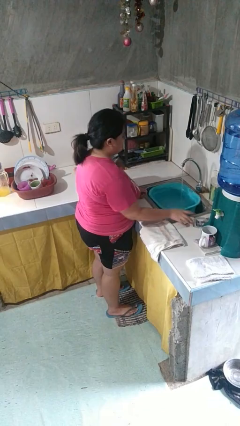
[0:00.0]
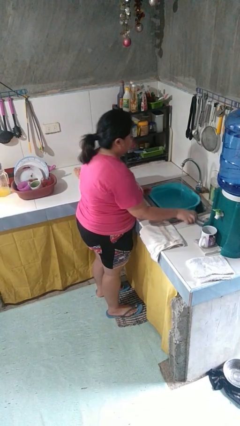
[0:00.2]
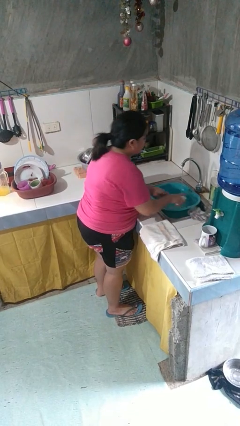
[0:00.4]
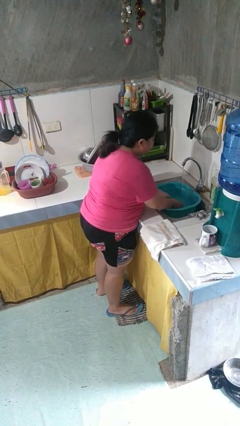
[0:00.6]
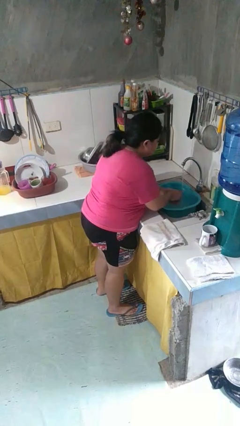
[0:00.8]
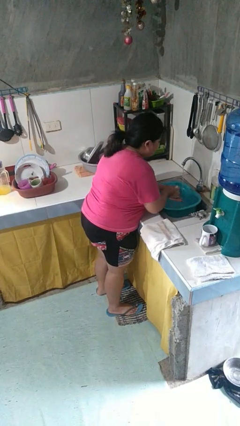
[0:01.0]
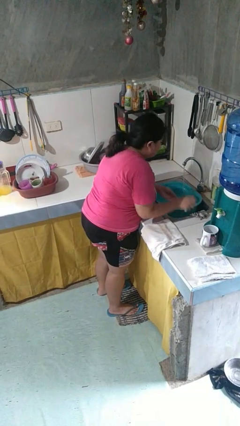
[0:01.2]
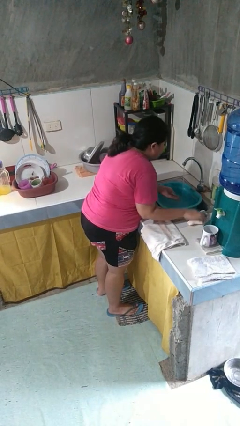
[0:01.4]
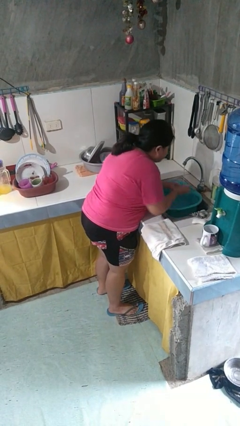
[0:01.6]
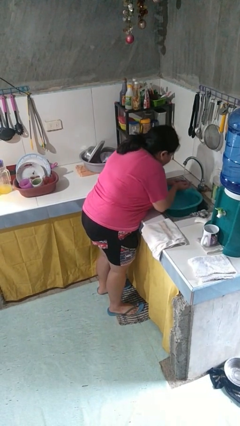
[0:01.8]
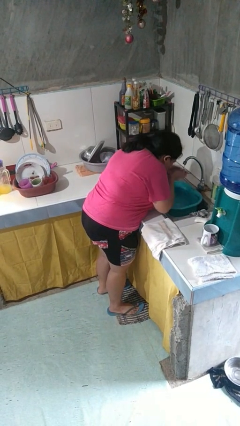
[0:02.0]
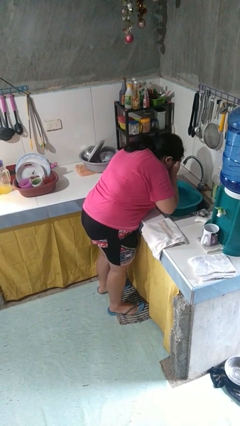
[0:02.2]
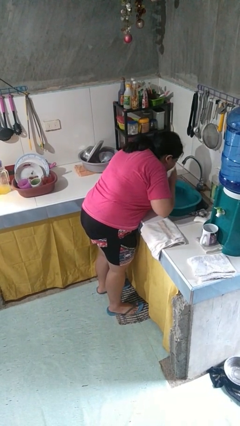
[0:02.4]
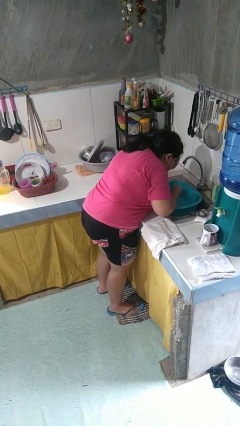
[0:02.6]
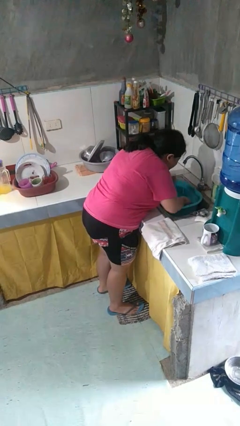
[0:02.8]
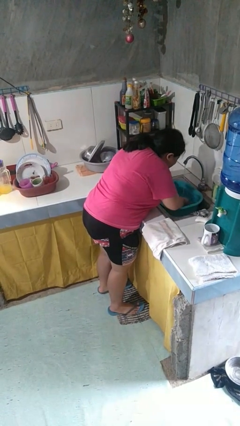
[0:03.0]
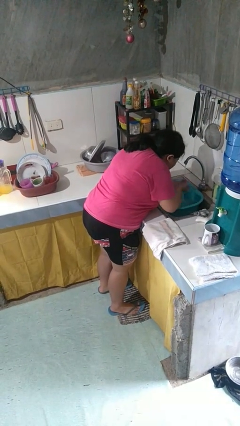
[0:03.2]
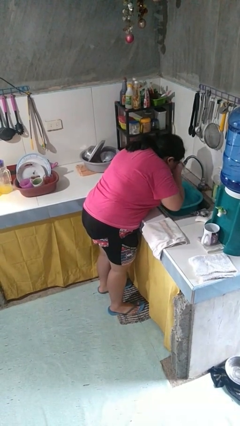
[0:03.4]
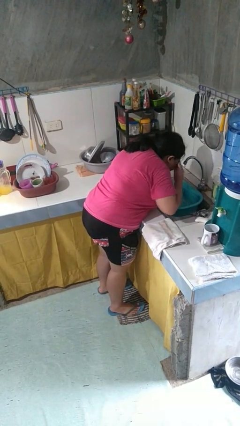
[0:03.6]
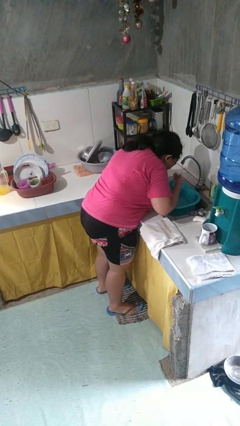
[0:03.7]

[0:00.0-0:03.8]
person washes face

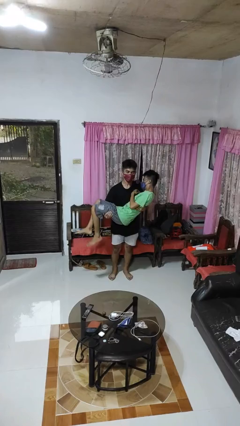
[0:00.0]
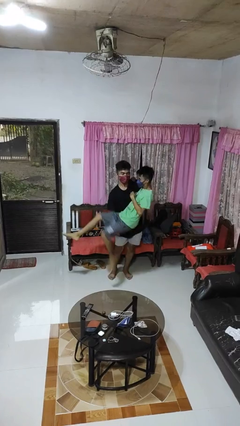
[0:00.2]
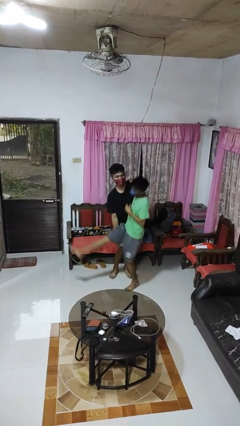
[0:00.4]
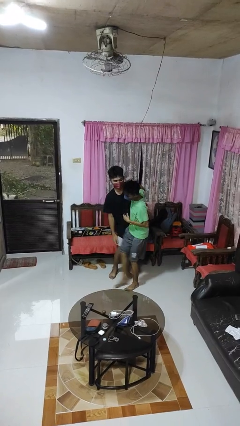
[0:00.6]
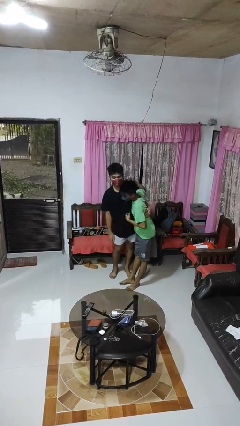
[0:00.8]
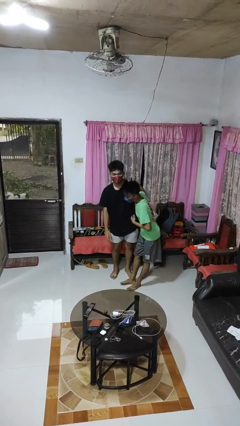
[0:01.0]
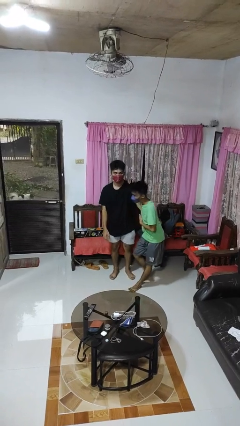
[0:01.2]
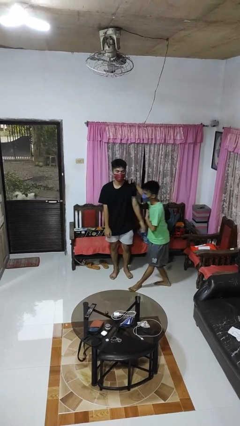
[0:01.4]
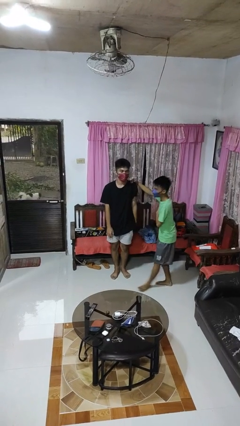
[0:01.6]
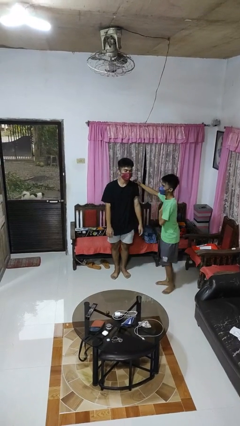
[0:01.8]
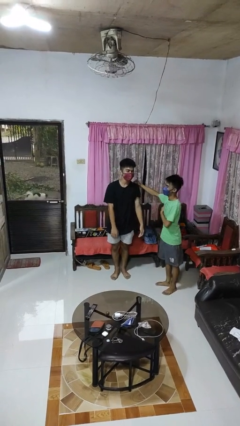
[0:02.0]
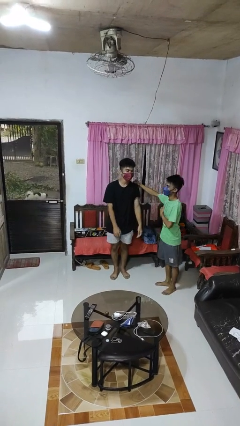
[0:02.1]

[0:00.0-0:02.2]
person puts down person

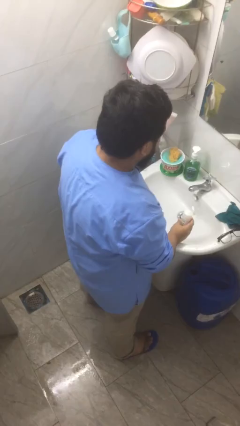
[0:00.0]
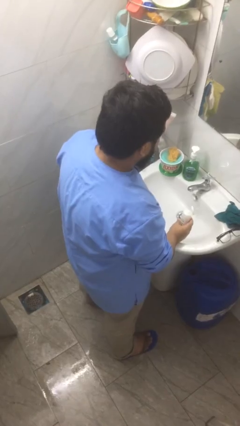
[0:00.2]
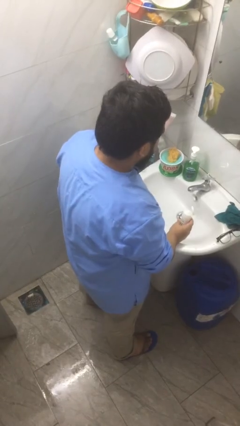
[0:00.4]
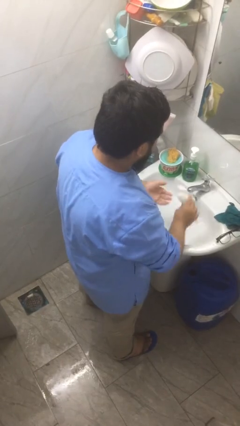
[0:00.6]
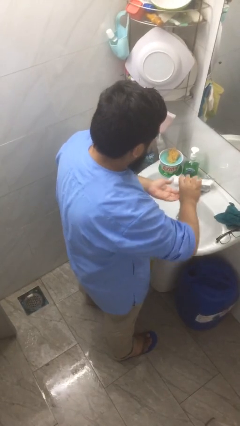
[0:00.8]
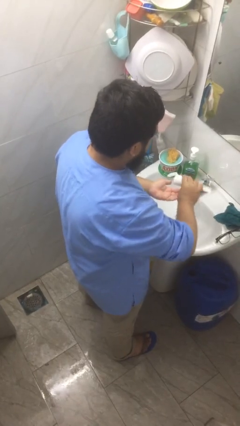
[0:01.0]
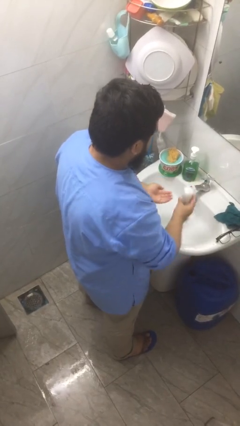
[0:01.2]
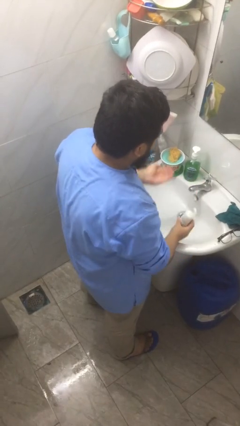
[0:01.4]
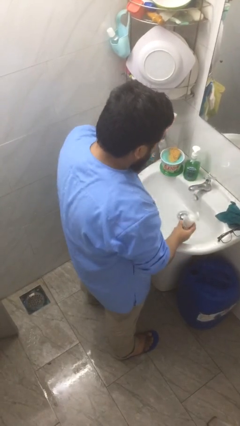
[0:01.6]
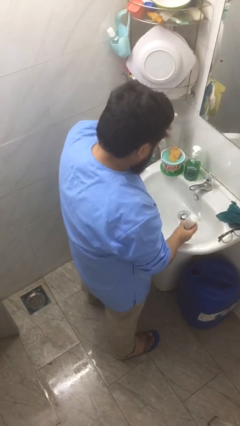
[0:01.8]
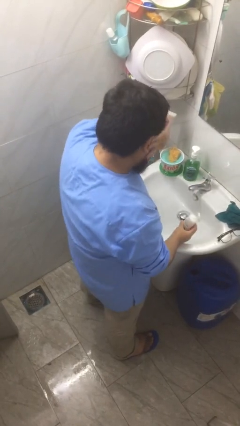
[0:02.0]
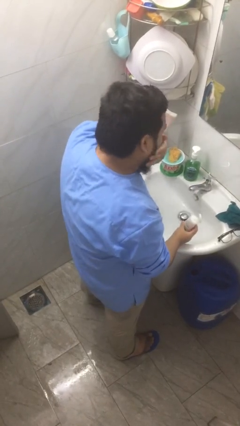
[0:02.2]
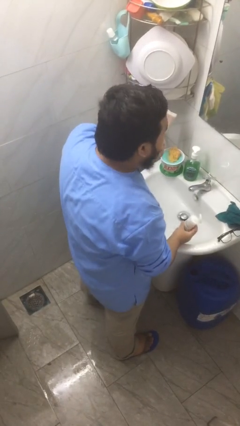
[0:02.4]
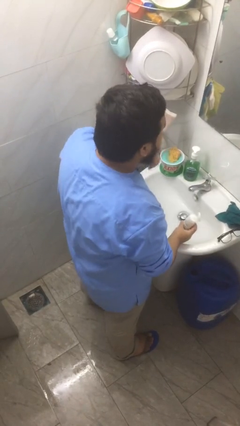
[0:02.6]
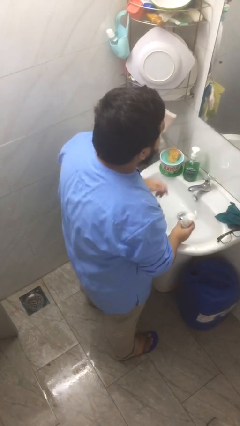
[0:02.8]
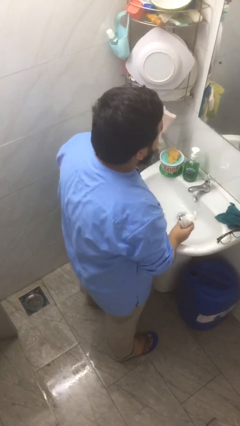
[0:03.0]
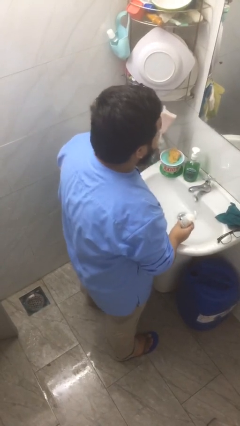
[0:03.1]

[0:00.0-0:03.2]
person applies facial moisturizer

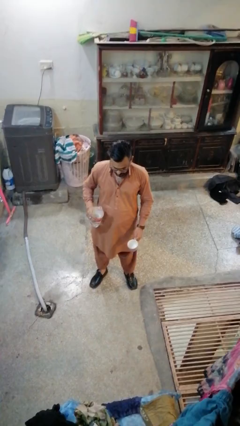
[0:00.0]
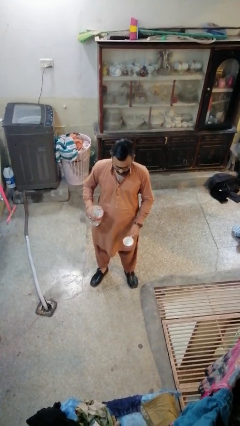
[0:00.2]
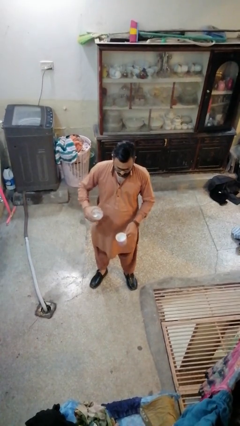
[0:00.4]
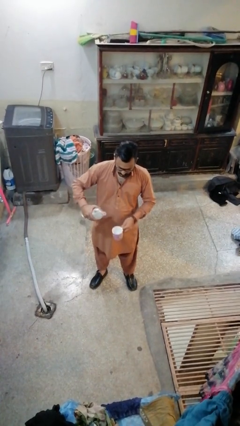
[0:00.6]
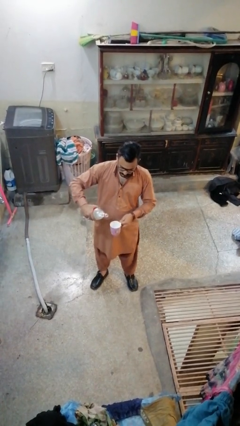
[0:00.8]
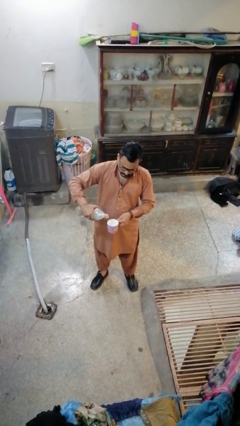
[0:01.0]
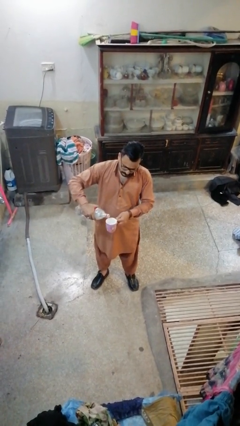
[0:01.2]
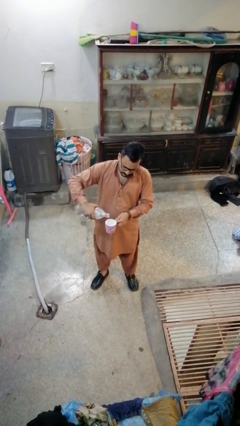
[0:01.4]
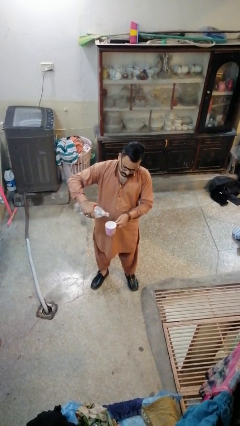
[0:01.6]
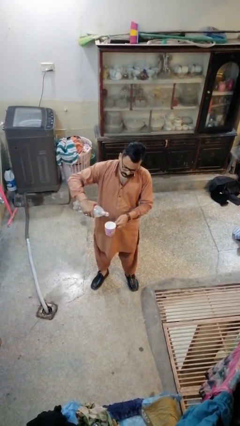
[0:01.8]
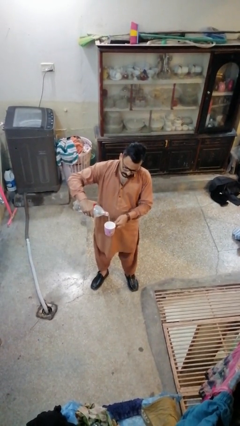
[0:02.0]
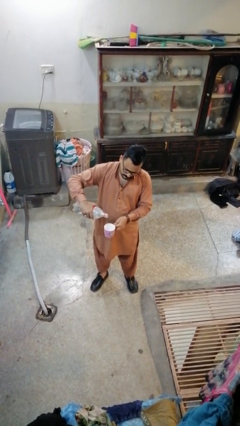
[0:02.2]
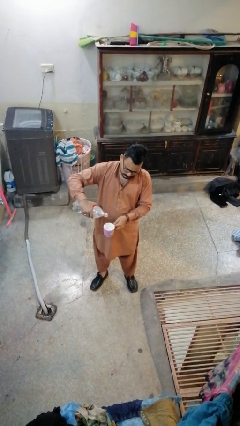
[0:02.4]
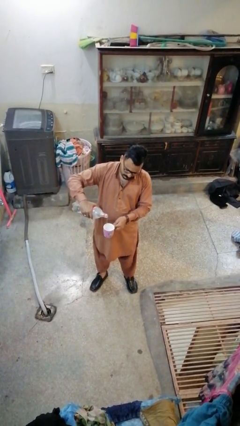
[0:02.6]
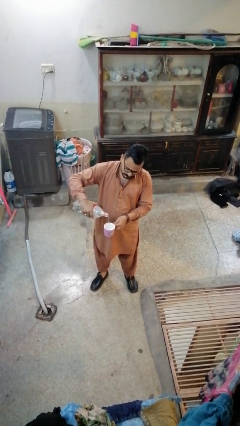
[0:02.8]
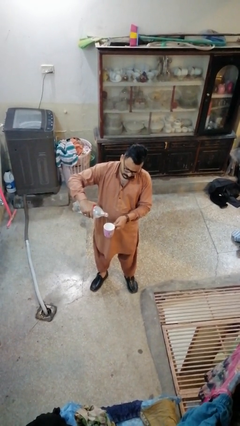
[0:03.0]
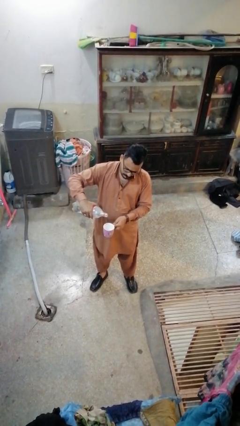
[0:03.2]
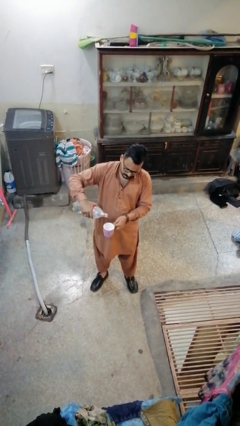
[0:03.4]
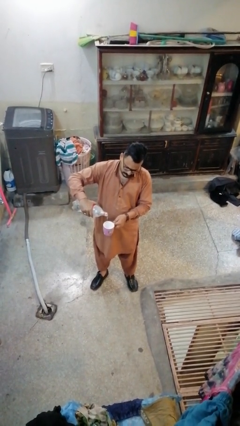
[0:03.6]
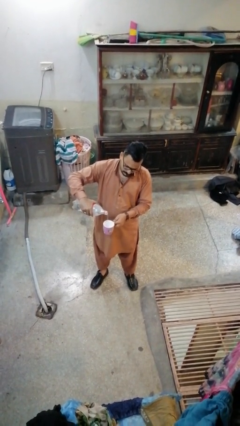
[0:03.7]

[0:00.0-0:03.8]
person pours liquid into cup

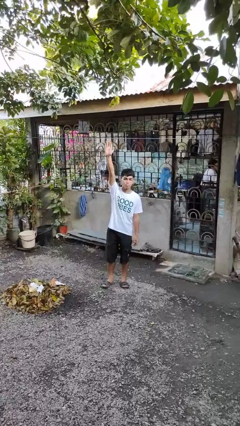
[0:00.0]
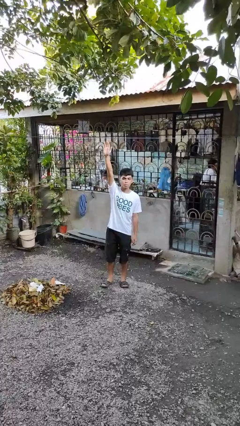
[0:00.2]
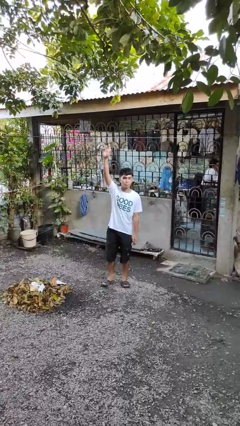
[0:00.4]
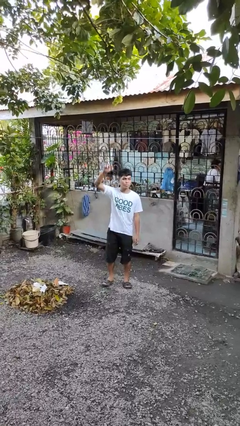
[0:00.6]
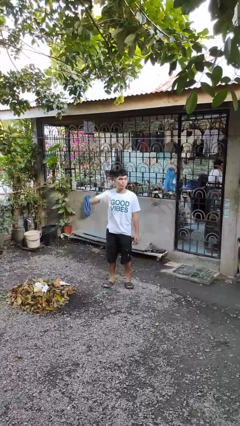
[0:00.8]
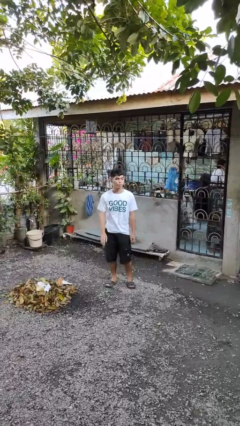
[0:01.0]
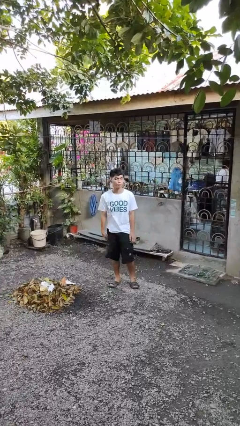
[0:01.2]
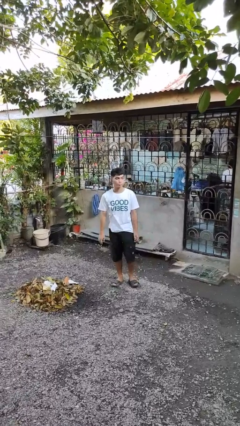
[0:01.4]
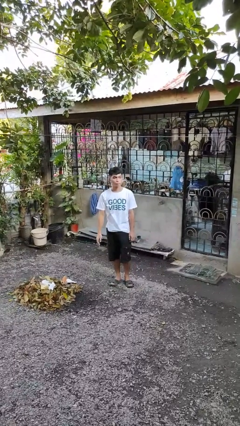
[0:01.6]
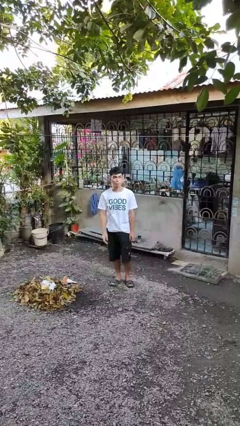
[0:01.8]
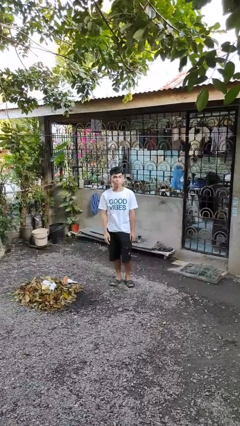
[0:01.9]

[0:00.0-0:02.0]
person gestures lower hand

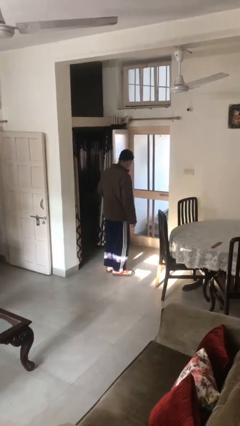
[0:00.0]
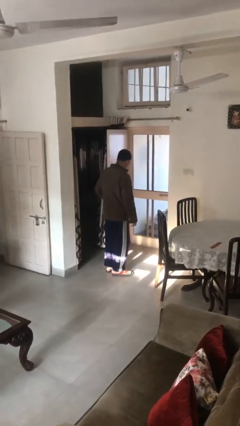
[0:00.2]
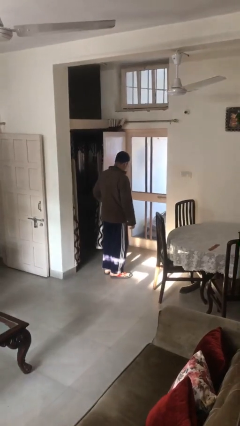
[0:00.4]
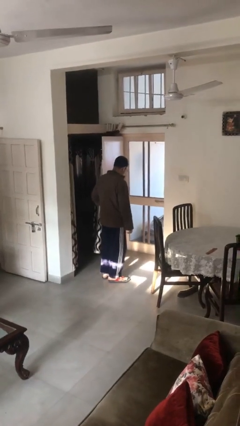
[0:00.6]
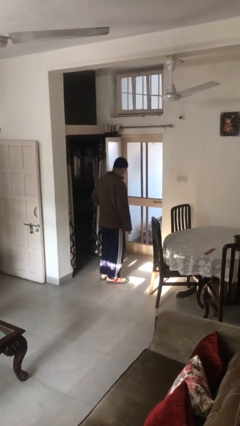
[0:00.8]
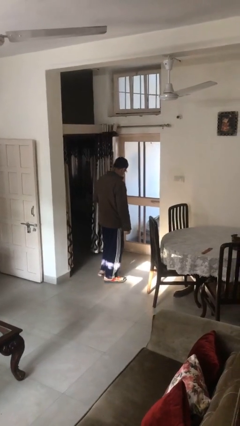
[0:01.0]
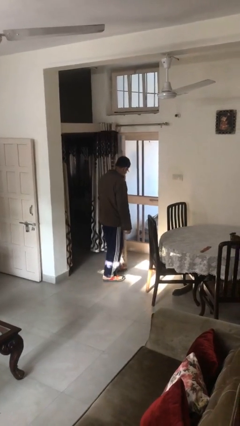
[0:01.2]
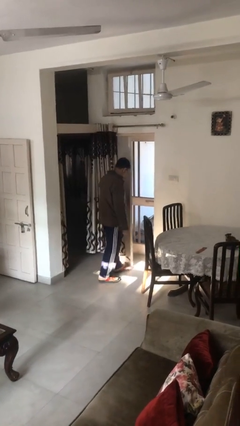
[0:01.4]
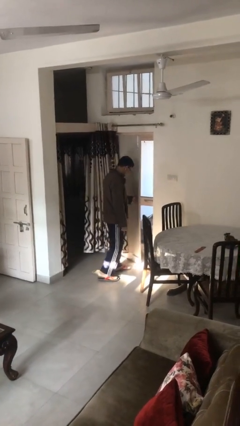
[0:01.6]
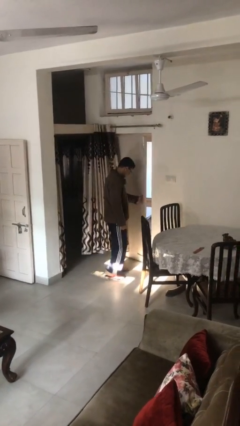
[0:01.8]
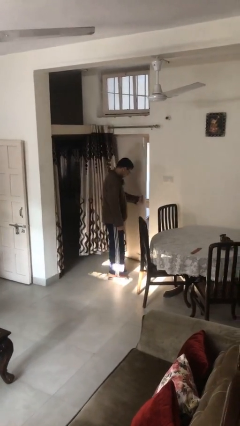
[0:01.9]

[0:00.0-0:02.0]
person closes facility door
